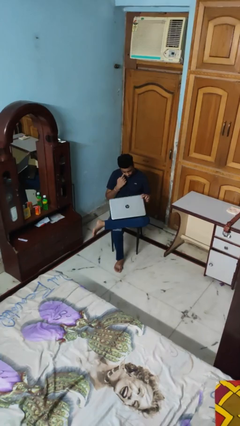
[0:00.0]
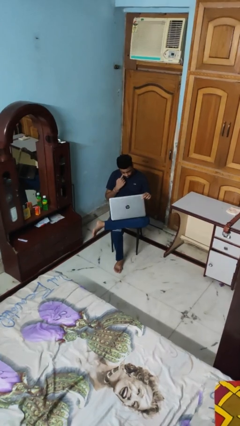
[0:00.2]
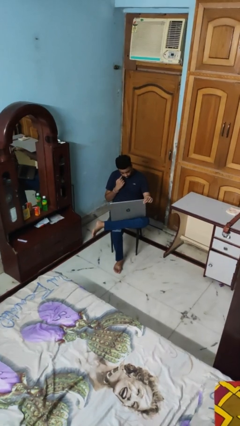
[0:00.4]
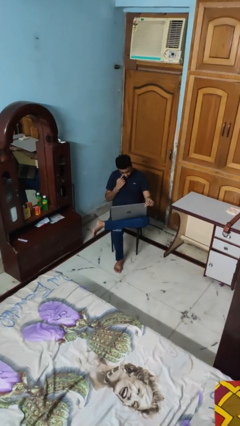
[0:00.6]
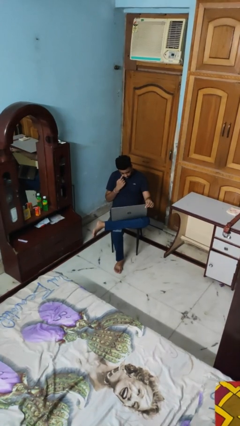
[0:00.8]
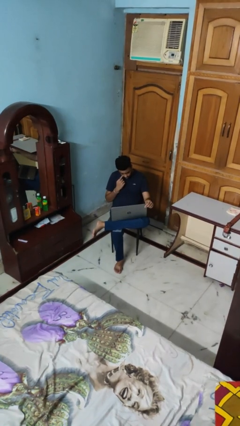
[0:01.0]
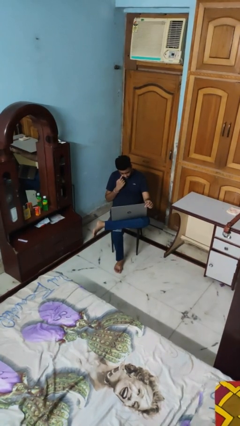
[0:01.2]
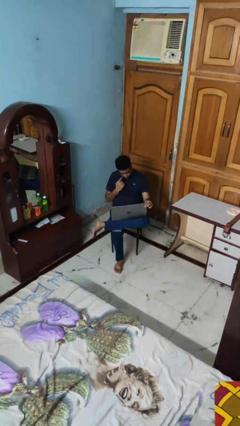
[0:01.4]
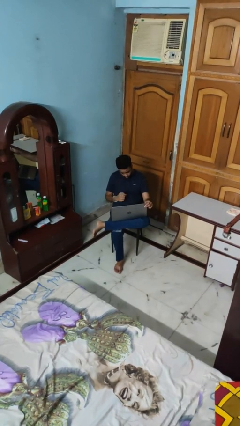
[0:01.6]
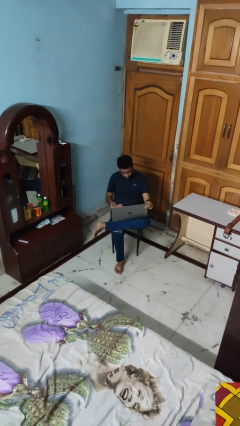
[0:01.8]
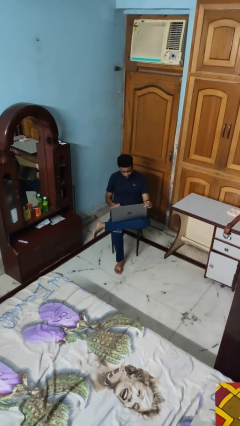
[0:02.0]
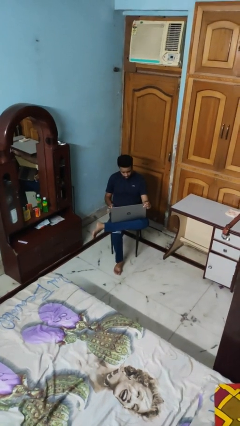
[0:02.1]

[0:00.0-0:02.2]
person opens laptop

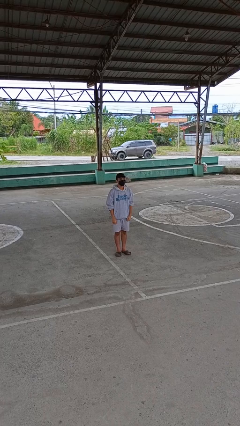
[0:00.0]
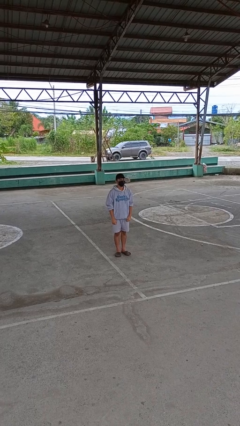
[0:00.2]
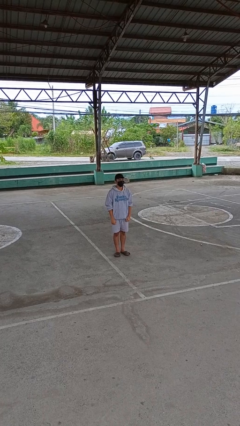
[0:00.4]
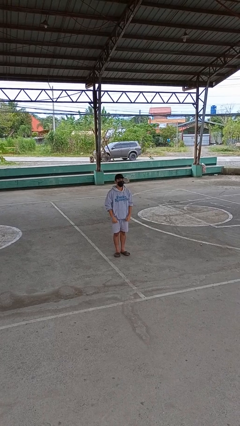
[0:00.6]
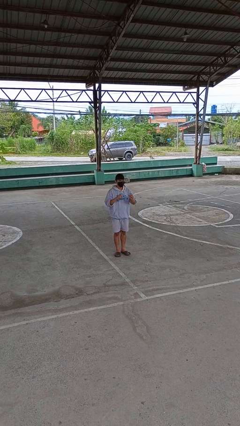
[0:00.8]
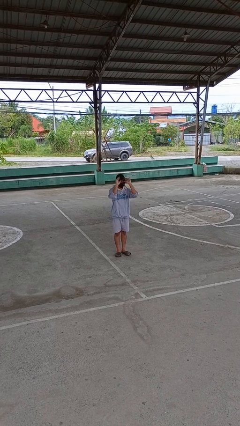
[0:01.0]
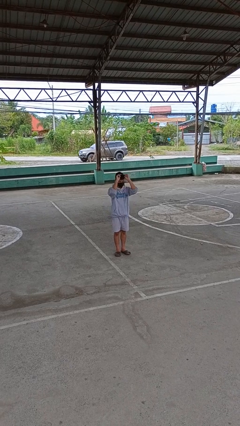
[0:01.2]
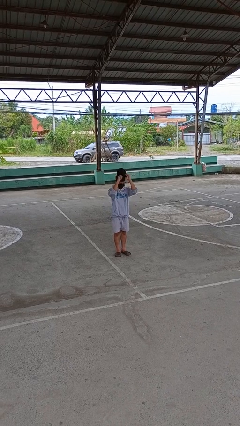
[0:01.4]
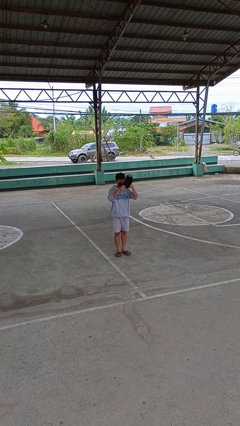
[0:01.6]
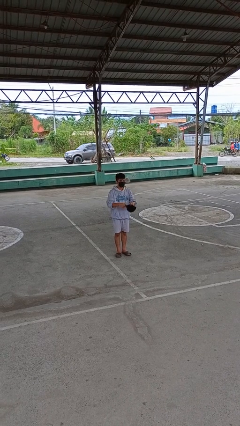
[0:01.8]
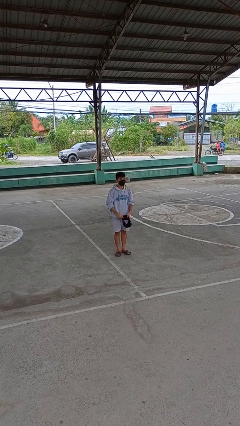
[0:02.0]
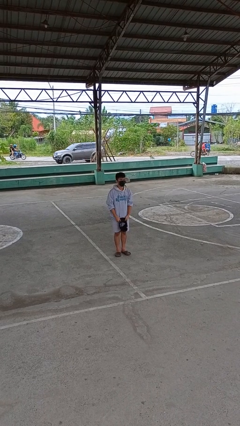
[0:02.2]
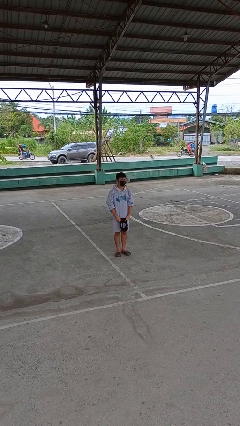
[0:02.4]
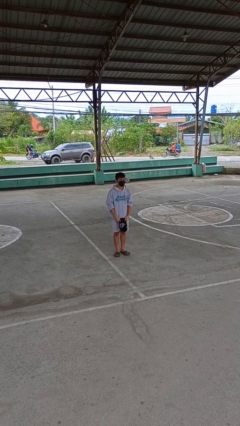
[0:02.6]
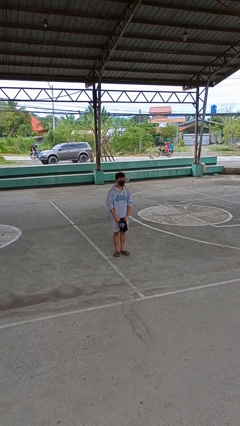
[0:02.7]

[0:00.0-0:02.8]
person takes off hat

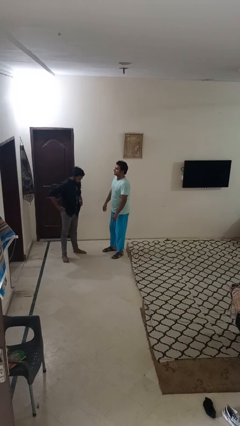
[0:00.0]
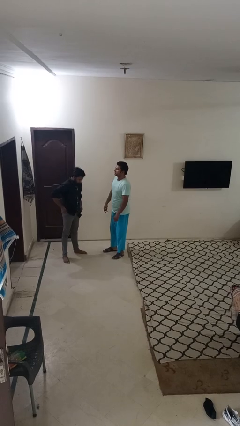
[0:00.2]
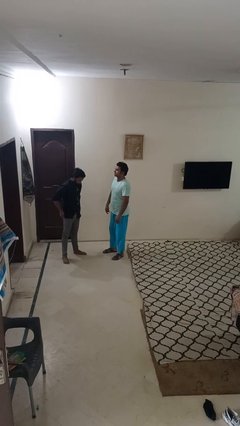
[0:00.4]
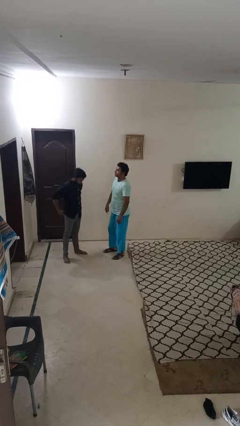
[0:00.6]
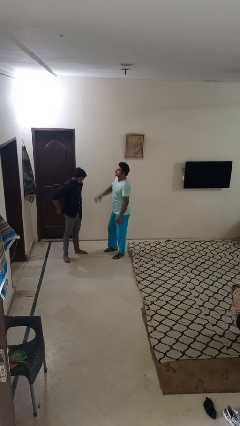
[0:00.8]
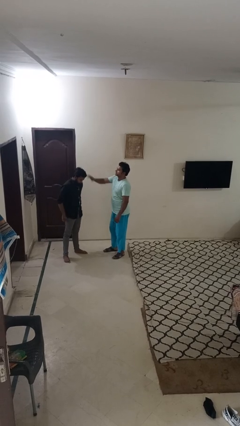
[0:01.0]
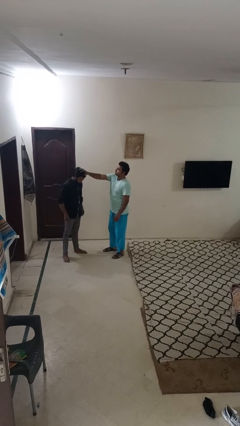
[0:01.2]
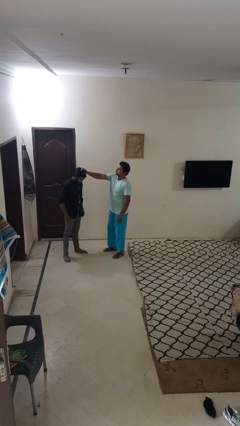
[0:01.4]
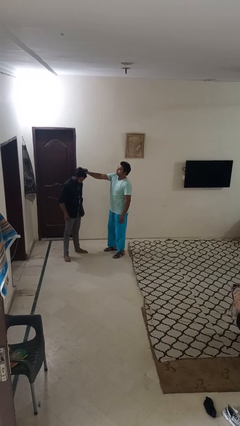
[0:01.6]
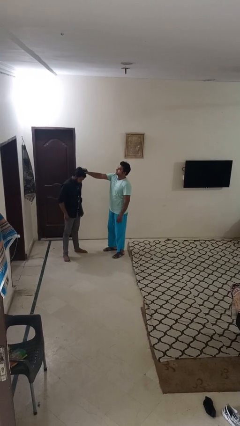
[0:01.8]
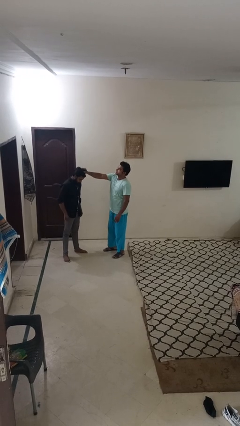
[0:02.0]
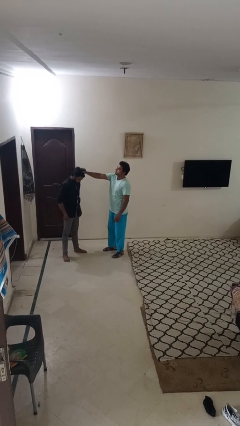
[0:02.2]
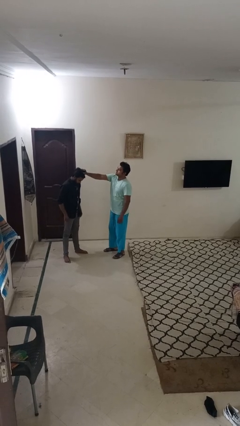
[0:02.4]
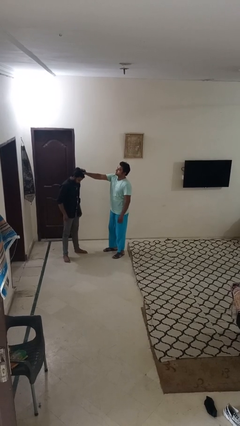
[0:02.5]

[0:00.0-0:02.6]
person grabs person by hair

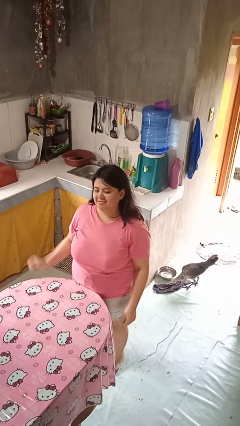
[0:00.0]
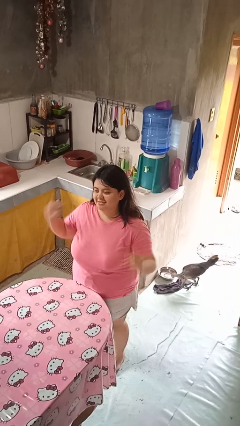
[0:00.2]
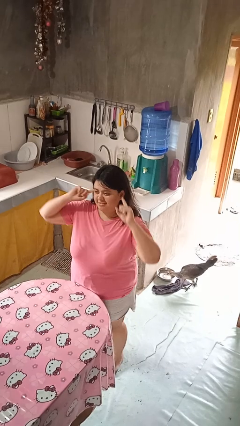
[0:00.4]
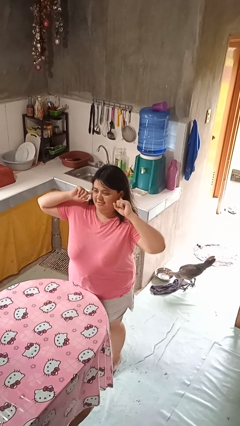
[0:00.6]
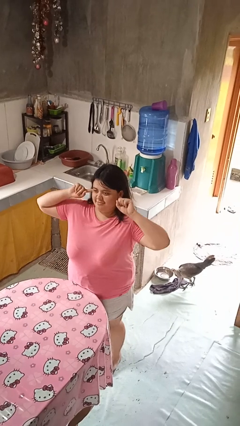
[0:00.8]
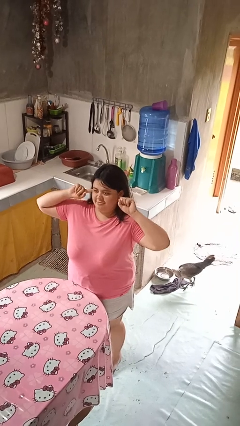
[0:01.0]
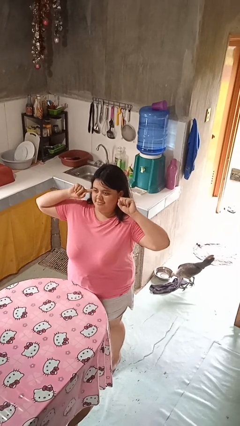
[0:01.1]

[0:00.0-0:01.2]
person puts fingers in ear

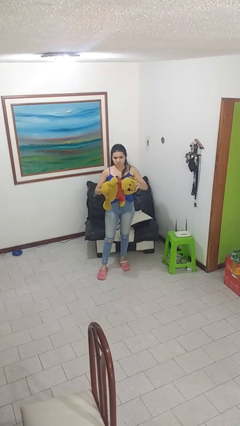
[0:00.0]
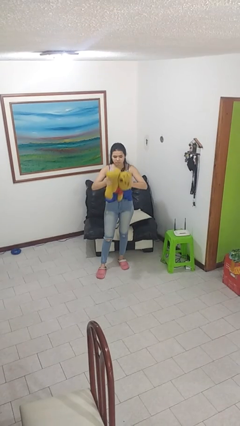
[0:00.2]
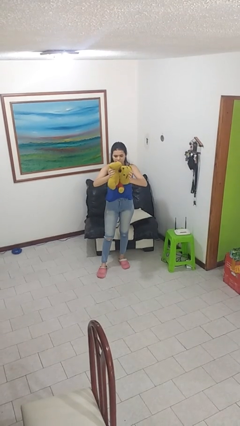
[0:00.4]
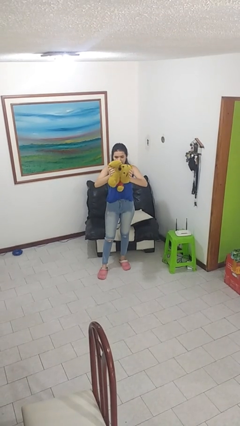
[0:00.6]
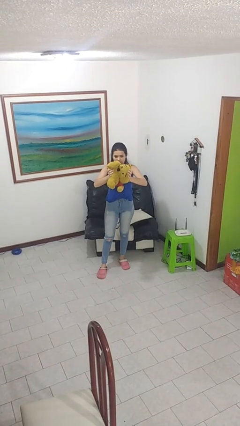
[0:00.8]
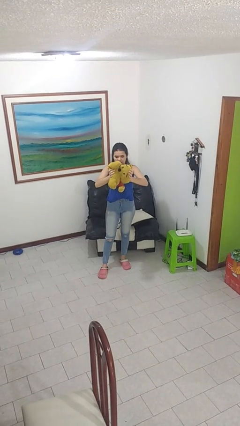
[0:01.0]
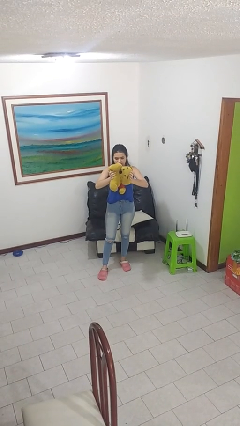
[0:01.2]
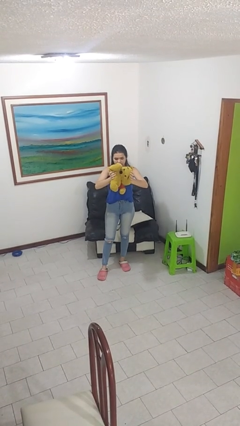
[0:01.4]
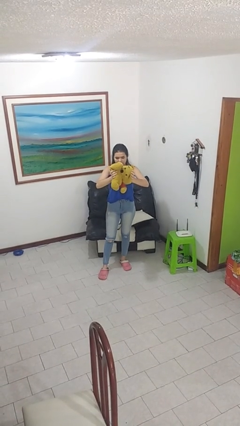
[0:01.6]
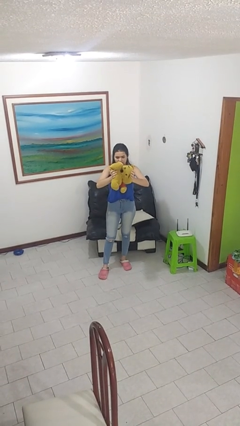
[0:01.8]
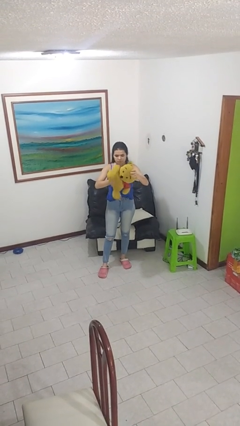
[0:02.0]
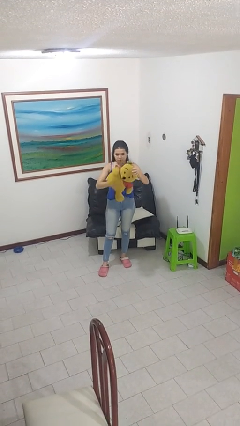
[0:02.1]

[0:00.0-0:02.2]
person squeezes object

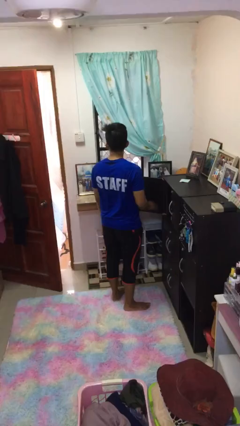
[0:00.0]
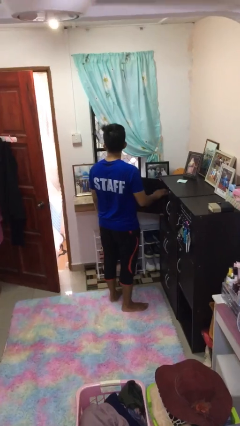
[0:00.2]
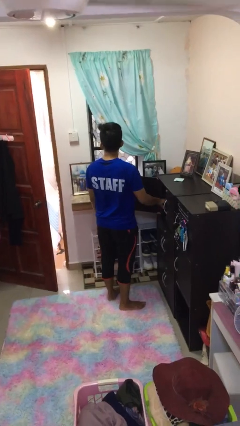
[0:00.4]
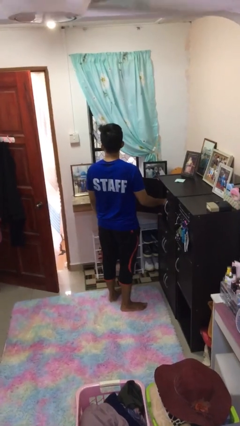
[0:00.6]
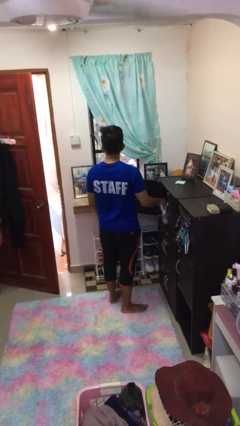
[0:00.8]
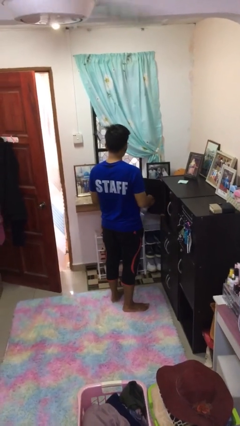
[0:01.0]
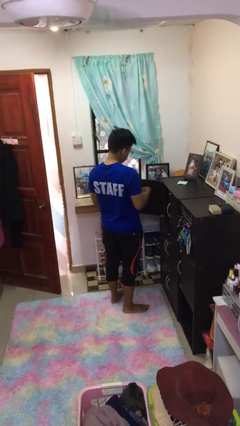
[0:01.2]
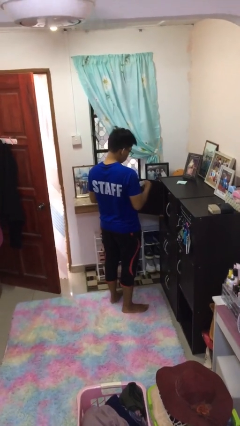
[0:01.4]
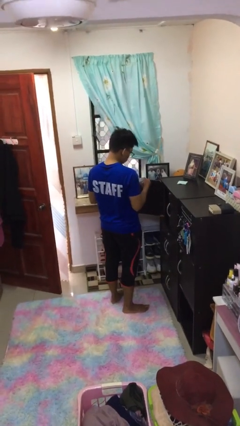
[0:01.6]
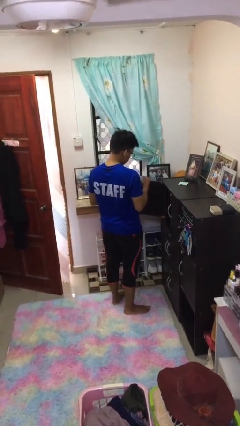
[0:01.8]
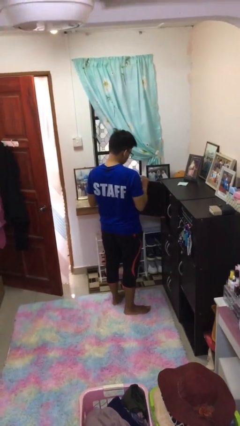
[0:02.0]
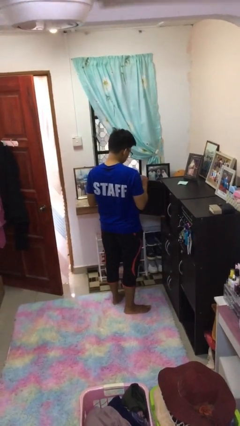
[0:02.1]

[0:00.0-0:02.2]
person picks up object from cabinet

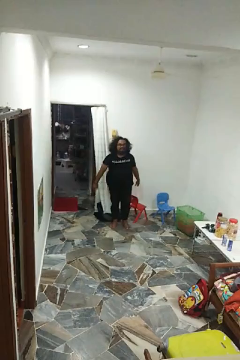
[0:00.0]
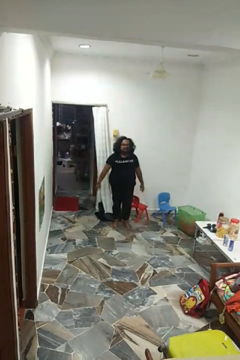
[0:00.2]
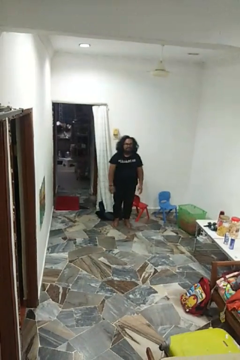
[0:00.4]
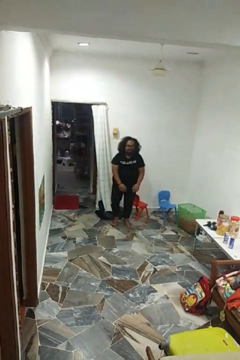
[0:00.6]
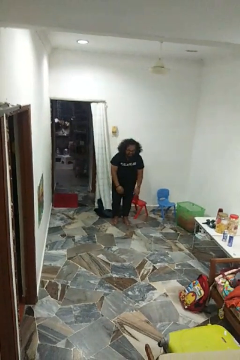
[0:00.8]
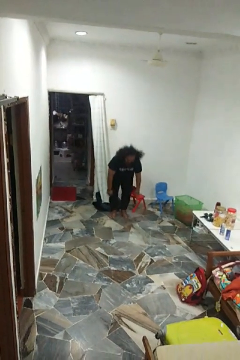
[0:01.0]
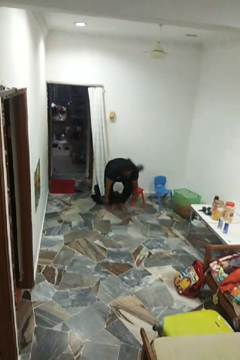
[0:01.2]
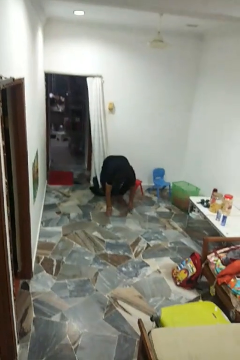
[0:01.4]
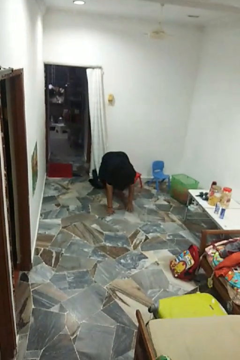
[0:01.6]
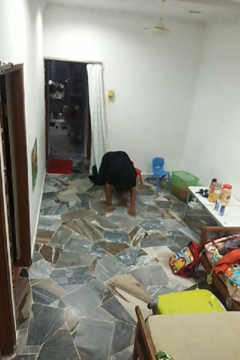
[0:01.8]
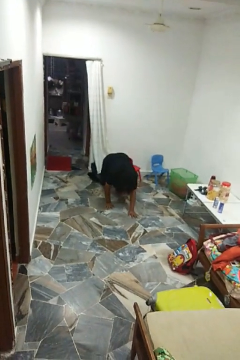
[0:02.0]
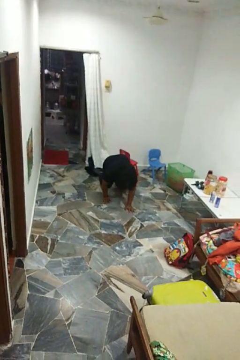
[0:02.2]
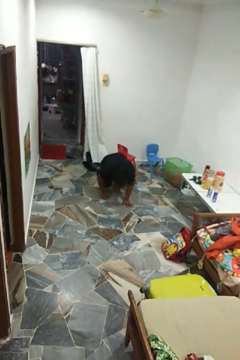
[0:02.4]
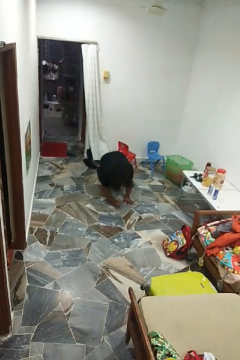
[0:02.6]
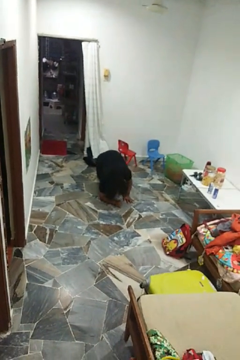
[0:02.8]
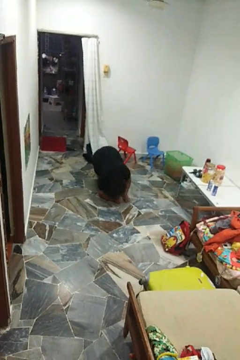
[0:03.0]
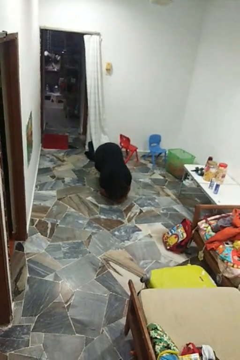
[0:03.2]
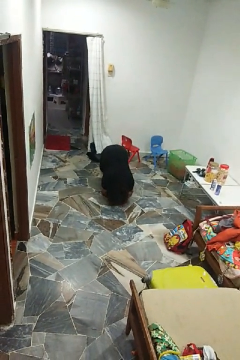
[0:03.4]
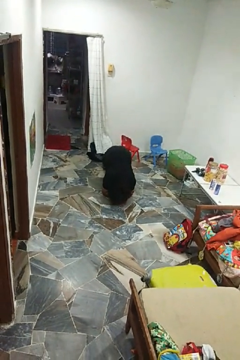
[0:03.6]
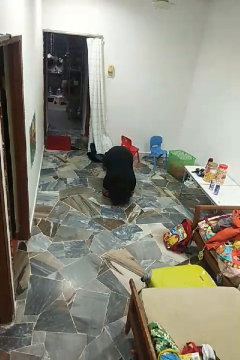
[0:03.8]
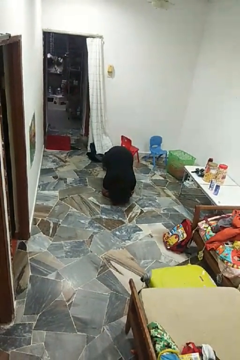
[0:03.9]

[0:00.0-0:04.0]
person exercises with plank

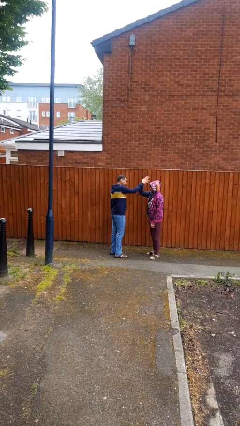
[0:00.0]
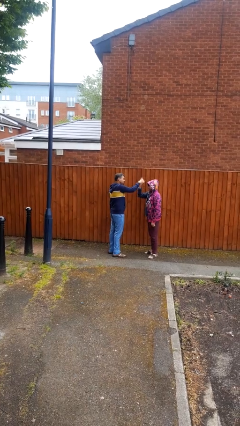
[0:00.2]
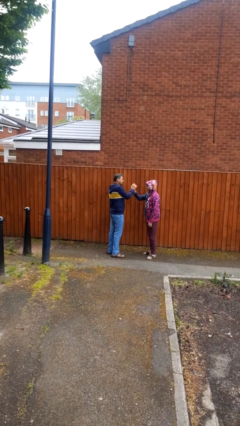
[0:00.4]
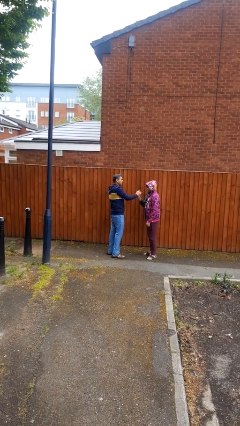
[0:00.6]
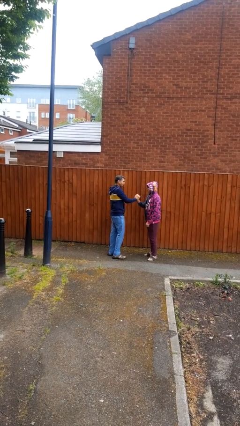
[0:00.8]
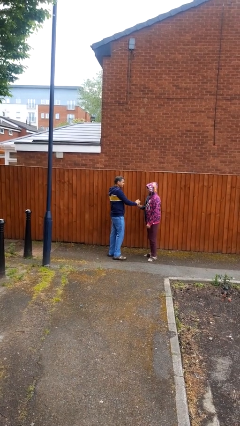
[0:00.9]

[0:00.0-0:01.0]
person highfives hand
